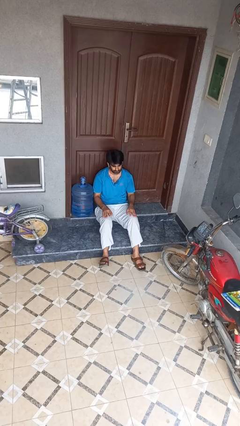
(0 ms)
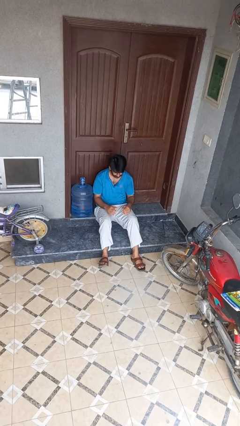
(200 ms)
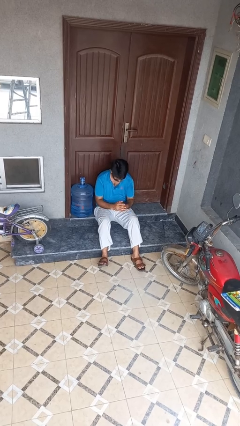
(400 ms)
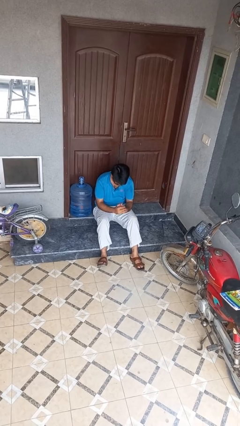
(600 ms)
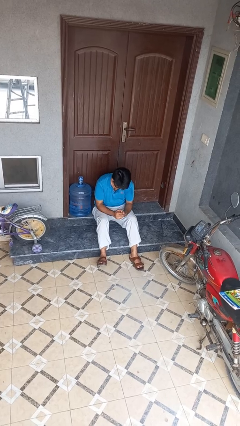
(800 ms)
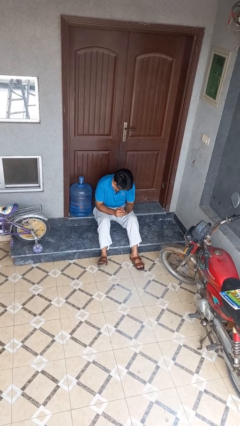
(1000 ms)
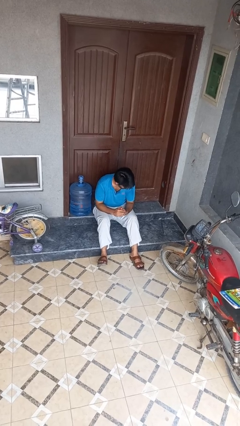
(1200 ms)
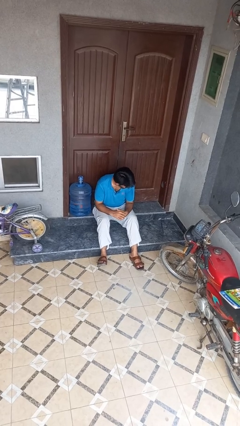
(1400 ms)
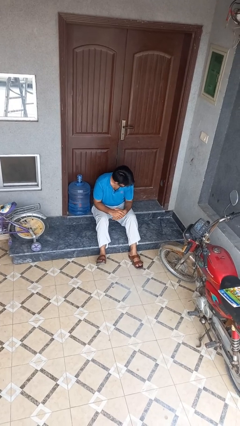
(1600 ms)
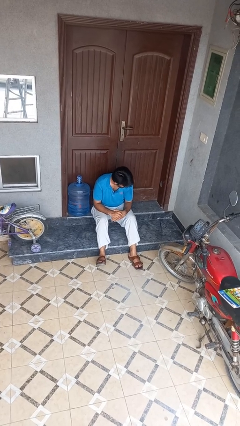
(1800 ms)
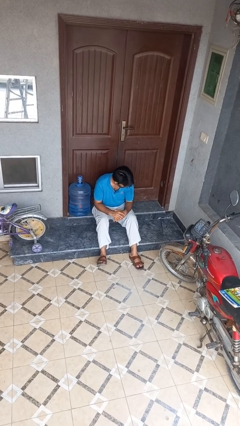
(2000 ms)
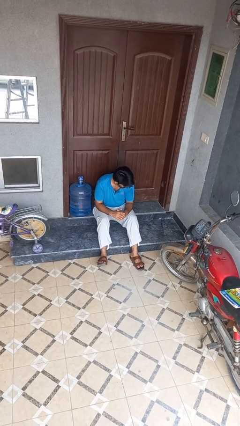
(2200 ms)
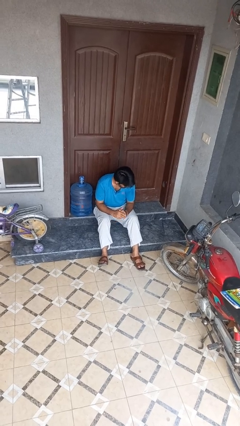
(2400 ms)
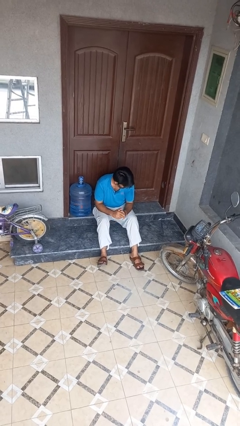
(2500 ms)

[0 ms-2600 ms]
person looks at hands in lap

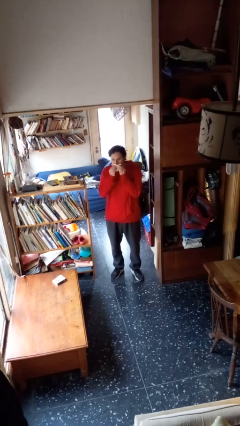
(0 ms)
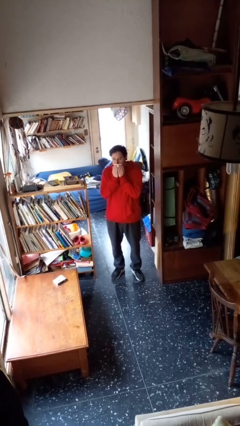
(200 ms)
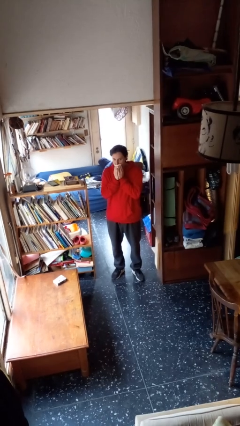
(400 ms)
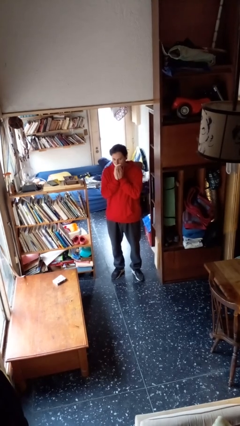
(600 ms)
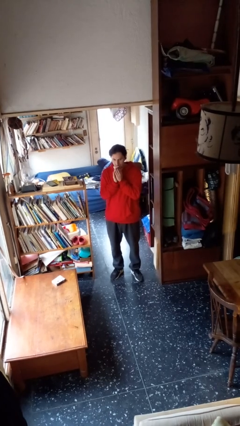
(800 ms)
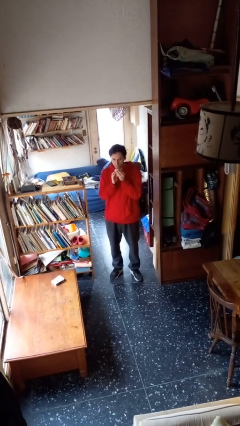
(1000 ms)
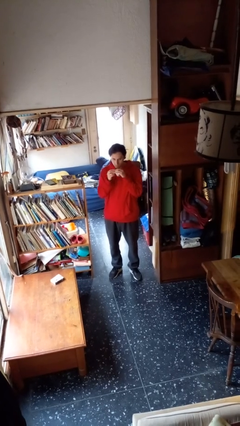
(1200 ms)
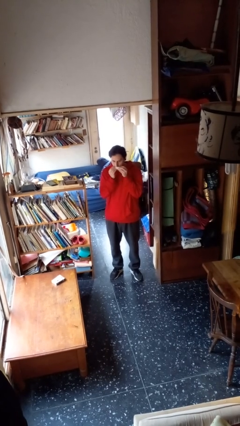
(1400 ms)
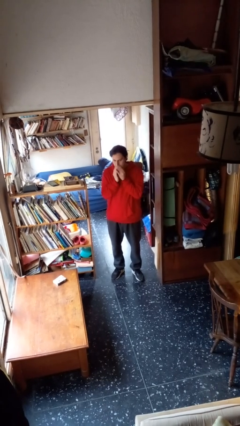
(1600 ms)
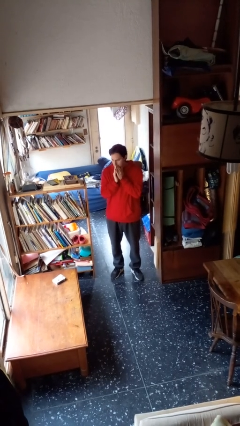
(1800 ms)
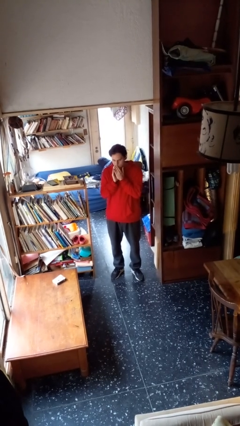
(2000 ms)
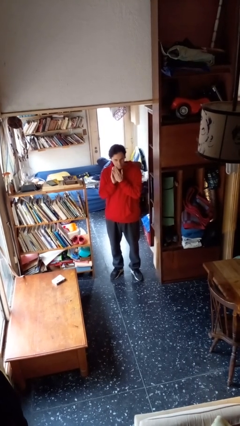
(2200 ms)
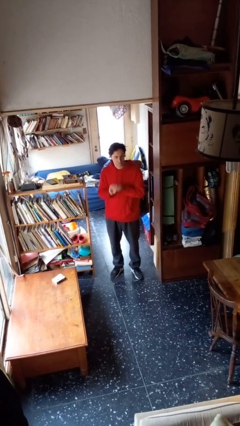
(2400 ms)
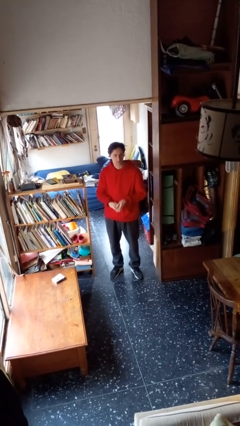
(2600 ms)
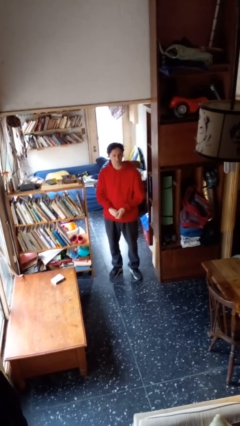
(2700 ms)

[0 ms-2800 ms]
person wipes mouth with napkin

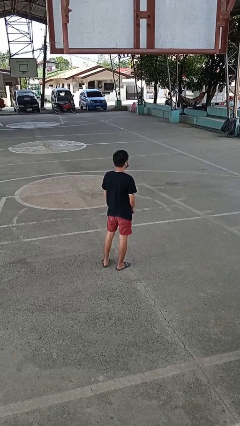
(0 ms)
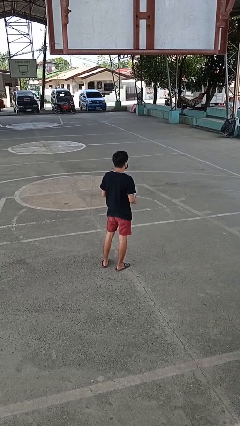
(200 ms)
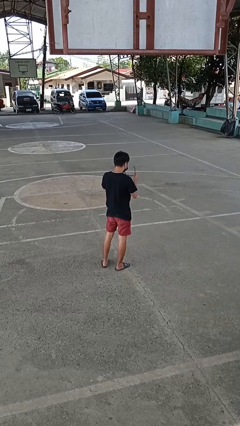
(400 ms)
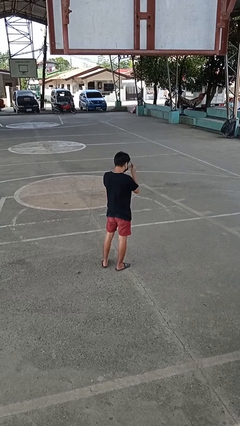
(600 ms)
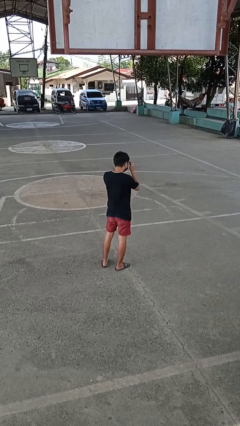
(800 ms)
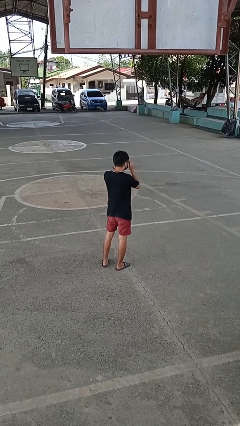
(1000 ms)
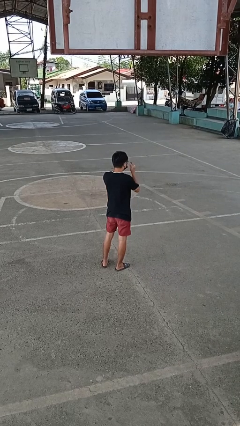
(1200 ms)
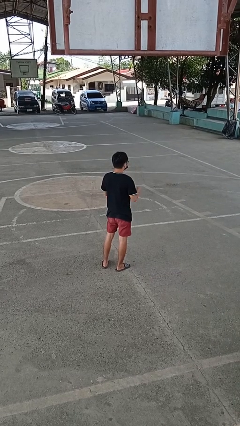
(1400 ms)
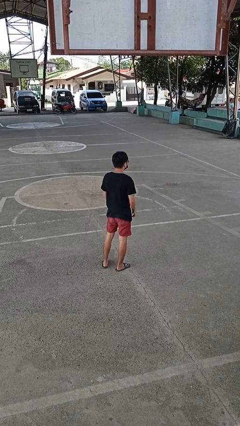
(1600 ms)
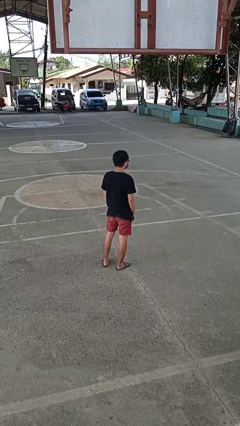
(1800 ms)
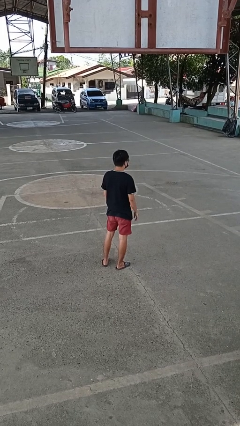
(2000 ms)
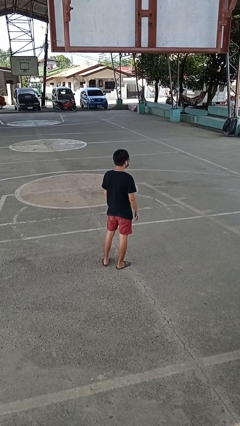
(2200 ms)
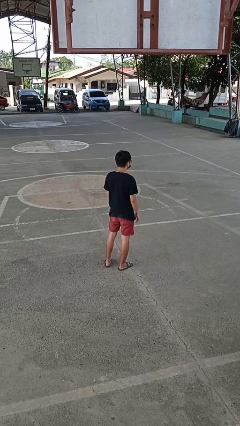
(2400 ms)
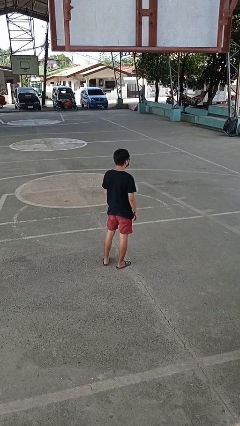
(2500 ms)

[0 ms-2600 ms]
person puts on glasses

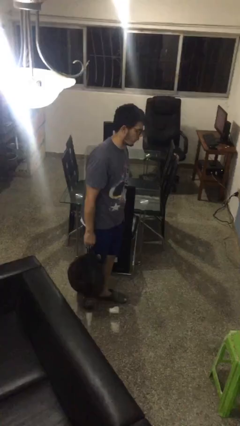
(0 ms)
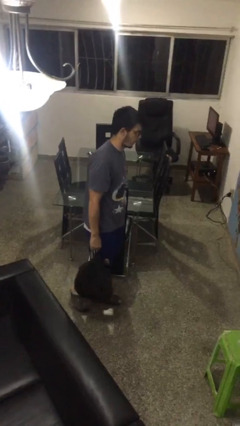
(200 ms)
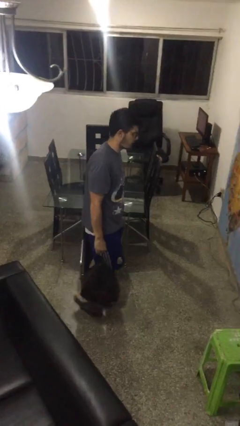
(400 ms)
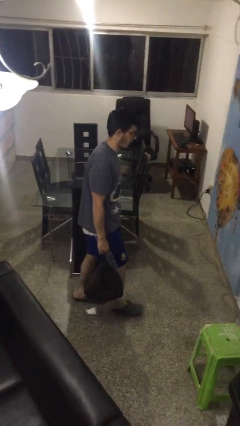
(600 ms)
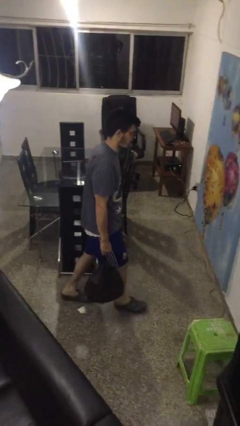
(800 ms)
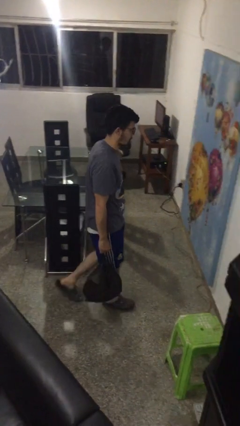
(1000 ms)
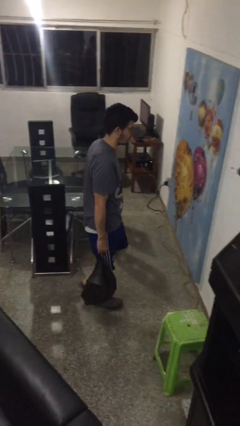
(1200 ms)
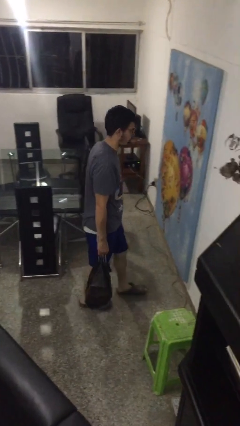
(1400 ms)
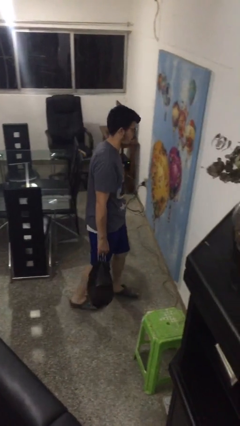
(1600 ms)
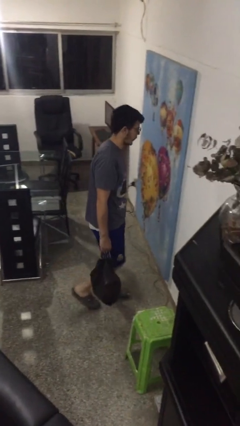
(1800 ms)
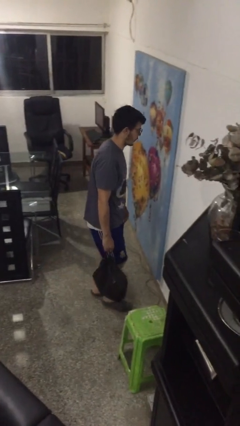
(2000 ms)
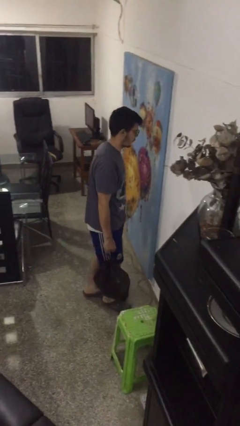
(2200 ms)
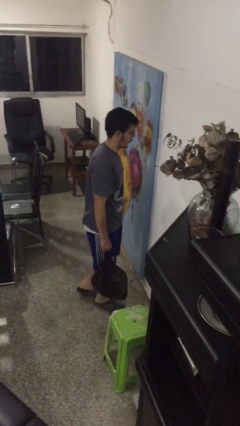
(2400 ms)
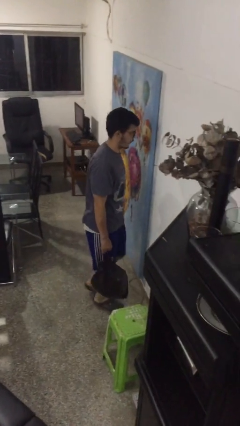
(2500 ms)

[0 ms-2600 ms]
person carries groceries

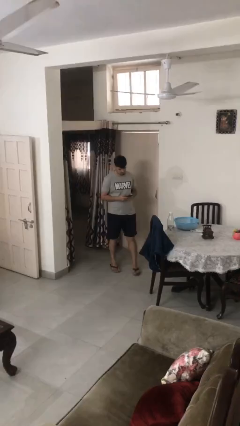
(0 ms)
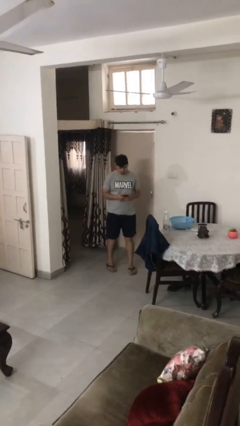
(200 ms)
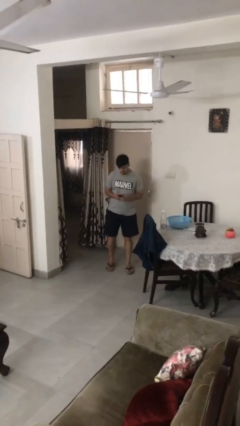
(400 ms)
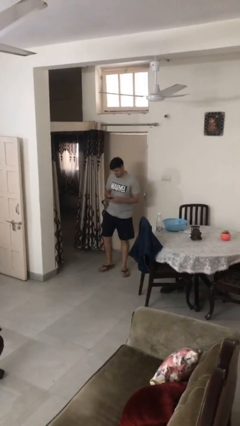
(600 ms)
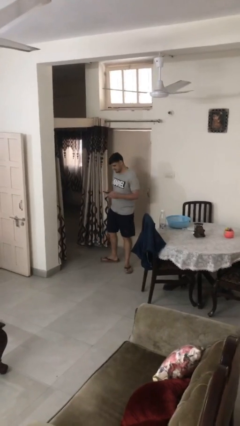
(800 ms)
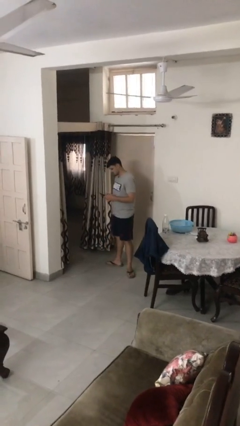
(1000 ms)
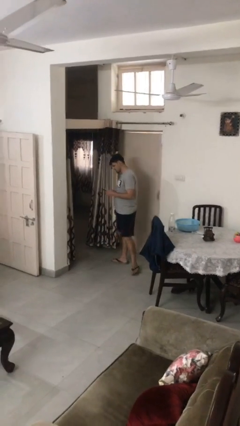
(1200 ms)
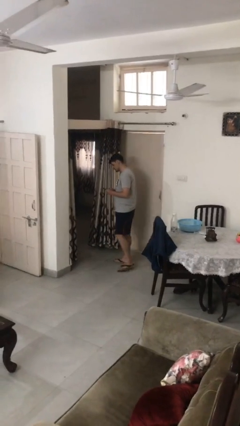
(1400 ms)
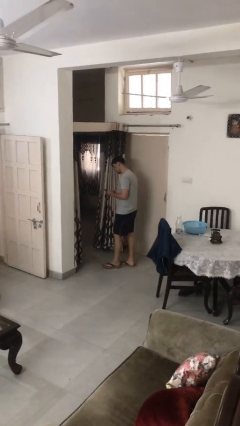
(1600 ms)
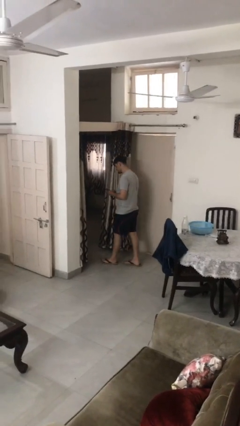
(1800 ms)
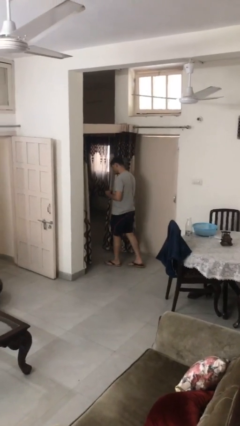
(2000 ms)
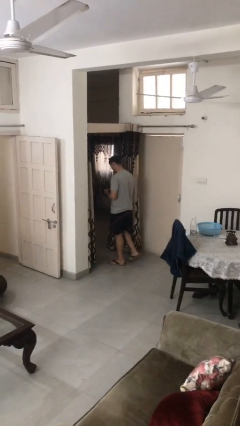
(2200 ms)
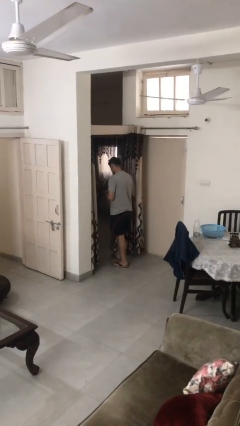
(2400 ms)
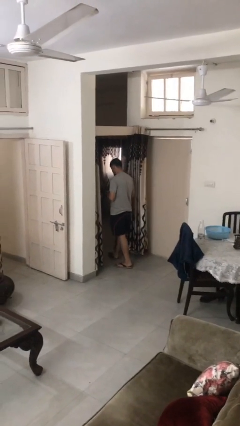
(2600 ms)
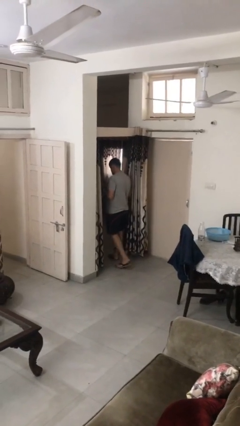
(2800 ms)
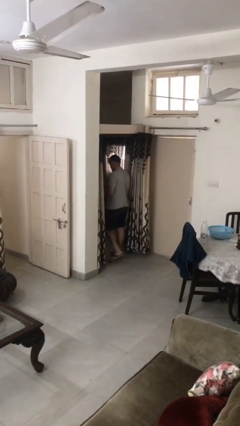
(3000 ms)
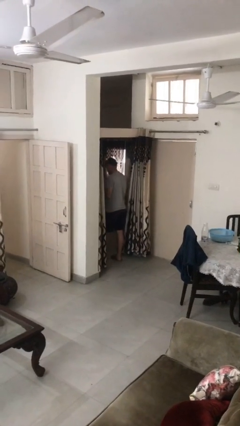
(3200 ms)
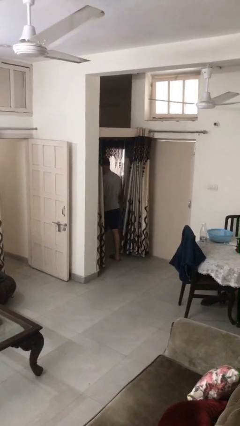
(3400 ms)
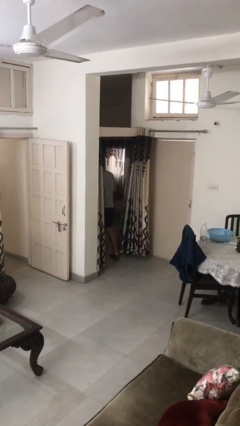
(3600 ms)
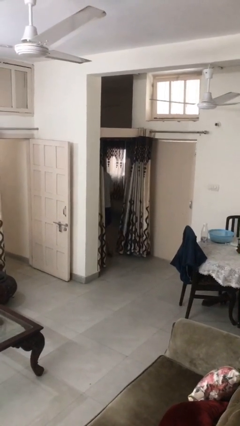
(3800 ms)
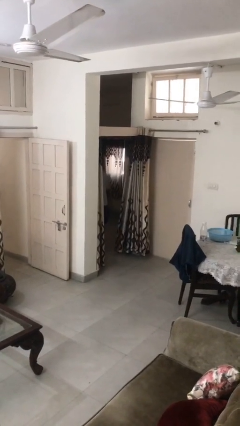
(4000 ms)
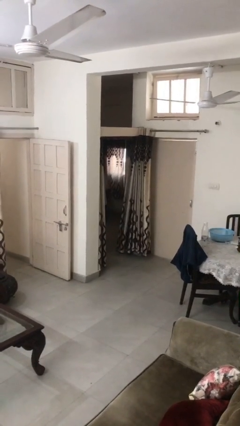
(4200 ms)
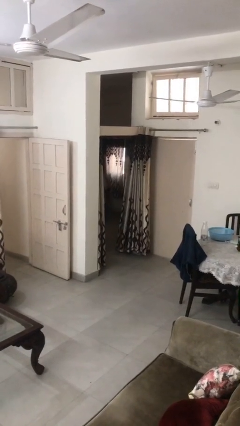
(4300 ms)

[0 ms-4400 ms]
person exits scene through structure

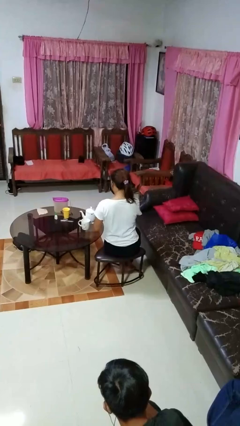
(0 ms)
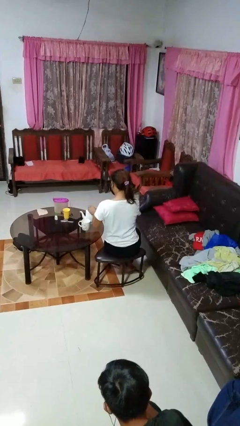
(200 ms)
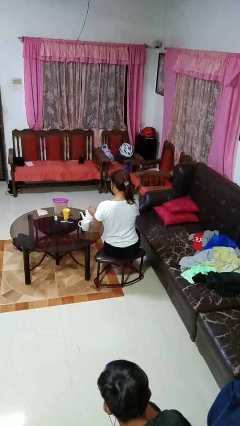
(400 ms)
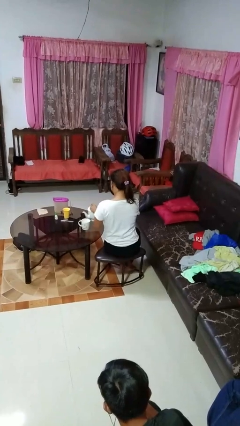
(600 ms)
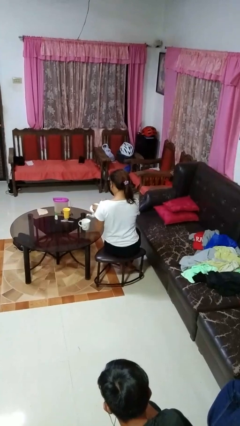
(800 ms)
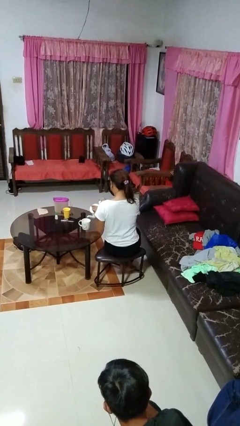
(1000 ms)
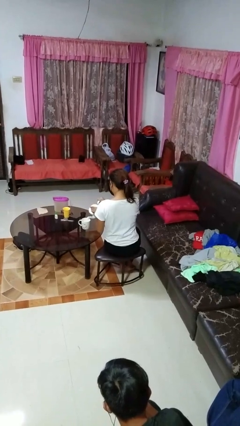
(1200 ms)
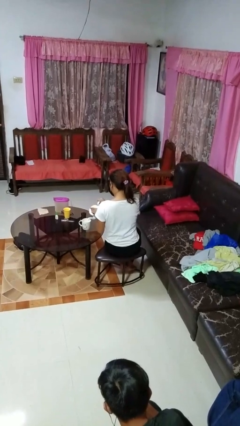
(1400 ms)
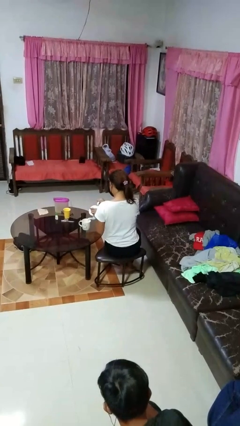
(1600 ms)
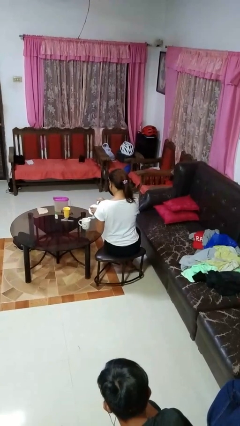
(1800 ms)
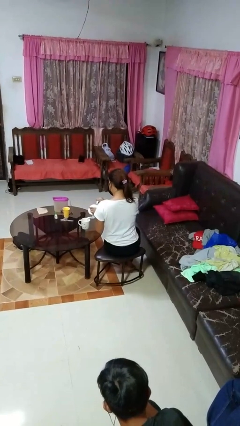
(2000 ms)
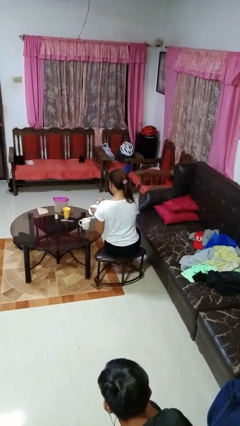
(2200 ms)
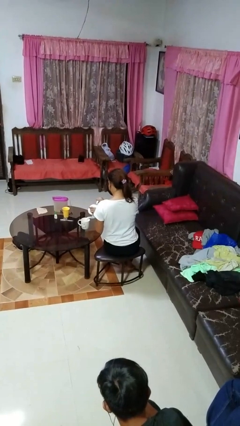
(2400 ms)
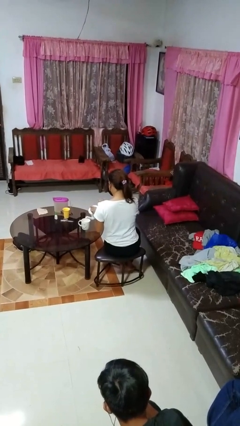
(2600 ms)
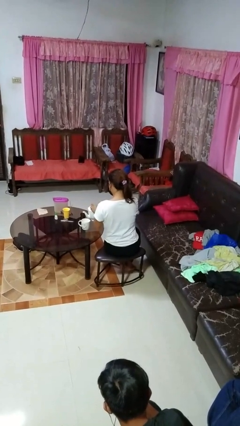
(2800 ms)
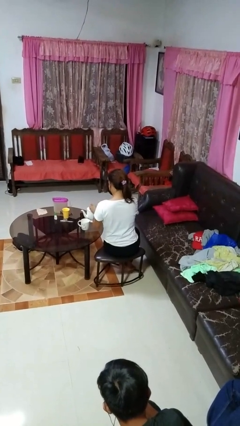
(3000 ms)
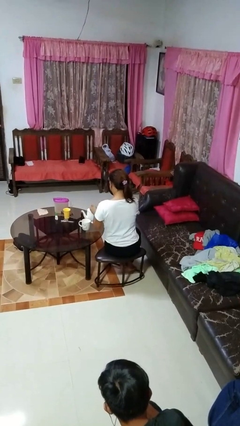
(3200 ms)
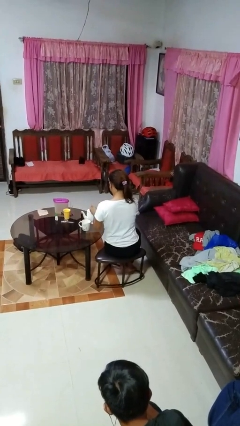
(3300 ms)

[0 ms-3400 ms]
person pours coffee into mug
